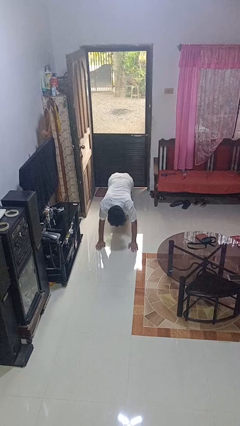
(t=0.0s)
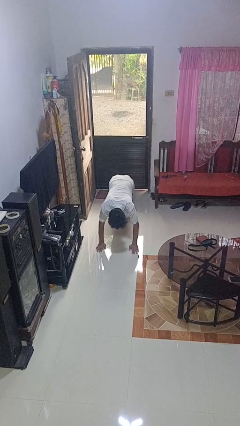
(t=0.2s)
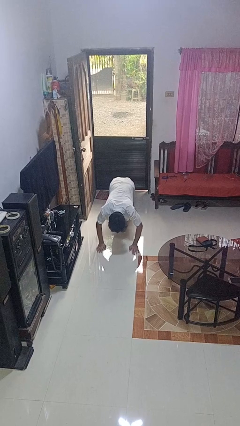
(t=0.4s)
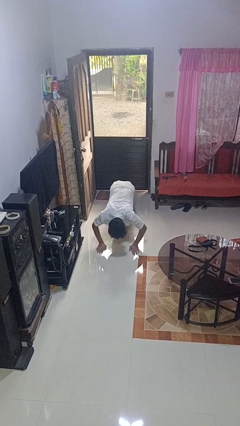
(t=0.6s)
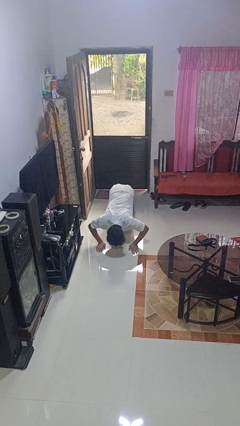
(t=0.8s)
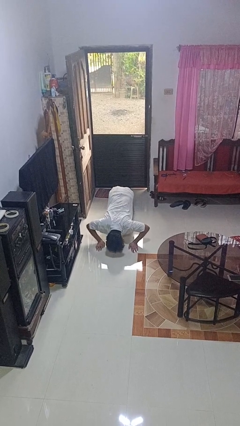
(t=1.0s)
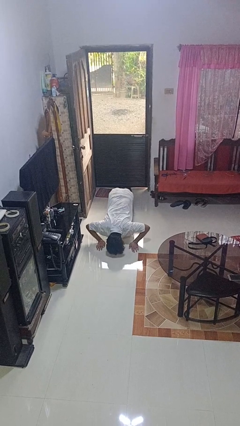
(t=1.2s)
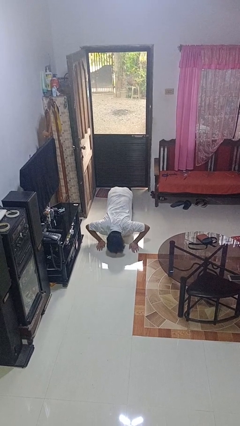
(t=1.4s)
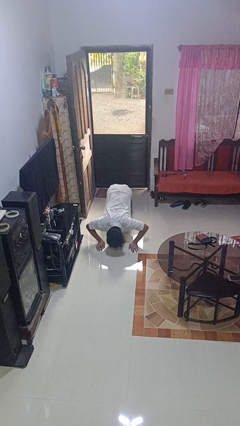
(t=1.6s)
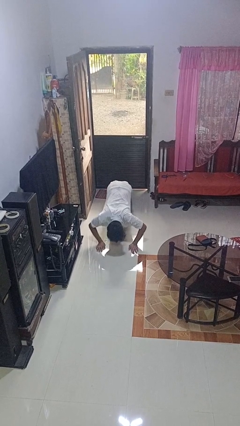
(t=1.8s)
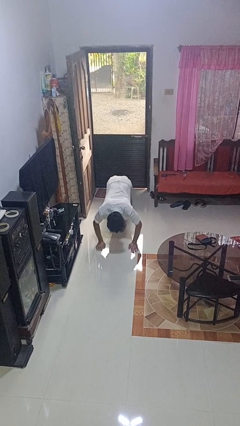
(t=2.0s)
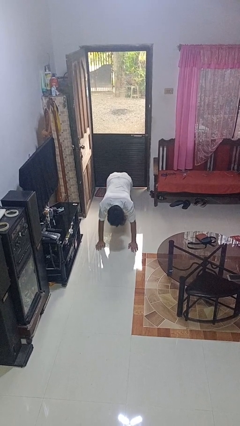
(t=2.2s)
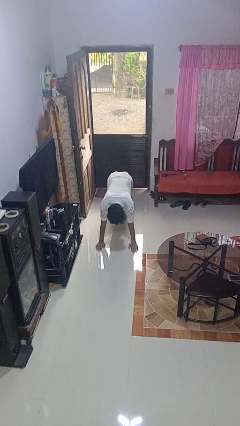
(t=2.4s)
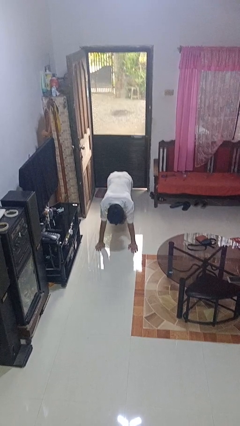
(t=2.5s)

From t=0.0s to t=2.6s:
person exercises with pushup

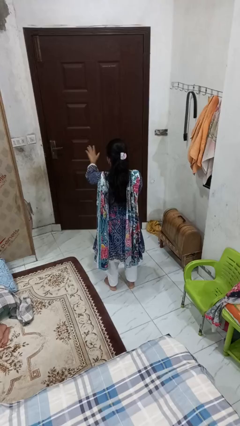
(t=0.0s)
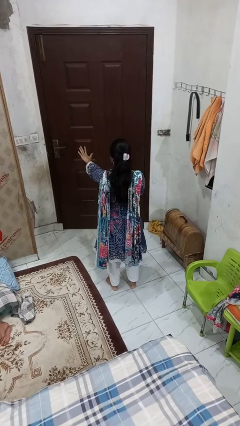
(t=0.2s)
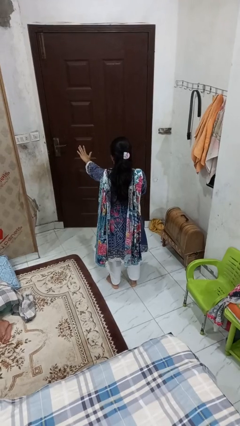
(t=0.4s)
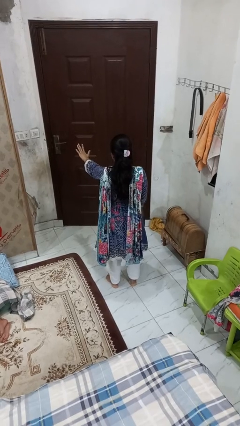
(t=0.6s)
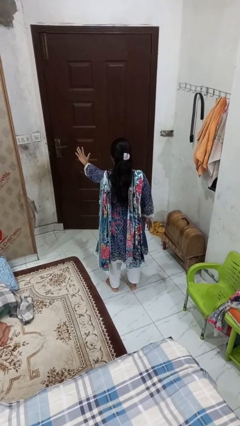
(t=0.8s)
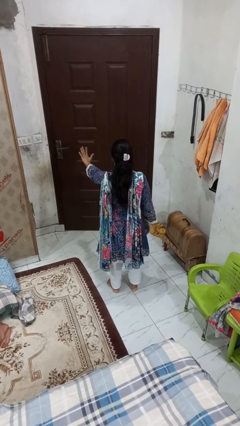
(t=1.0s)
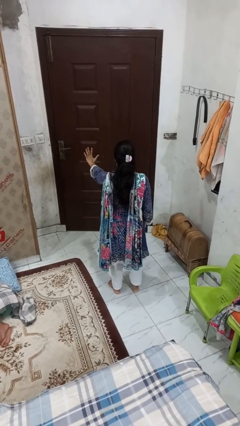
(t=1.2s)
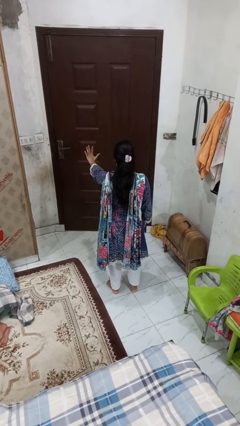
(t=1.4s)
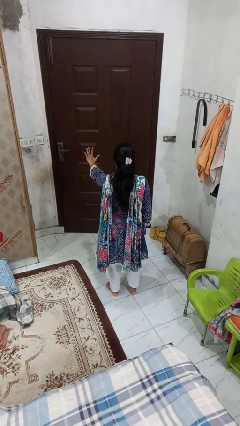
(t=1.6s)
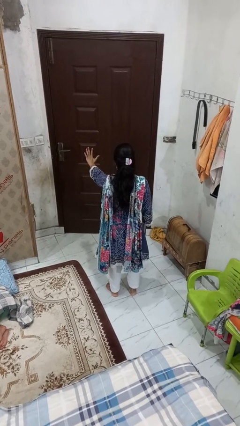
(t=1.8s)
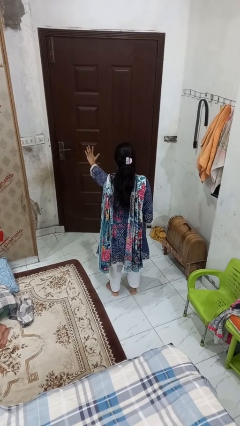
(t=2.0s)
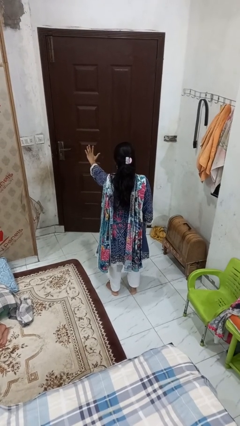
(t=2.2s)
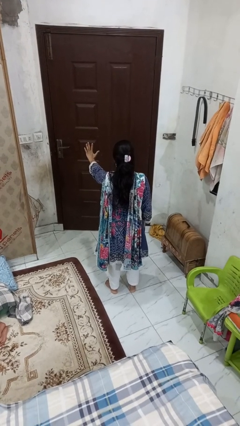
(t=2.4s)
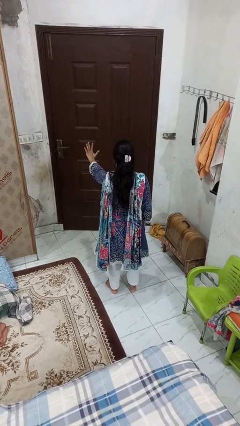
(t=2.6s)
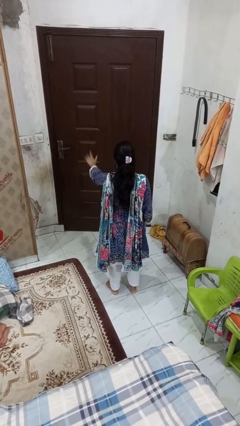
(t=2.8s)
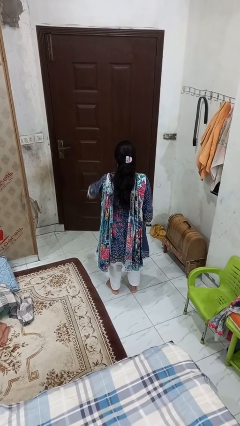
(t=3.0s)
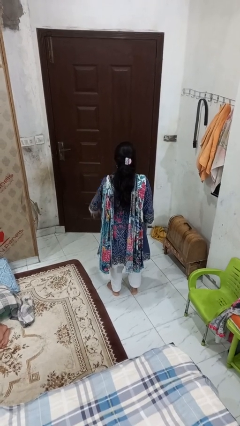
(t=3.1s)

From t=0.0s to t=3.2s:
person gestures stop

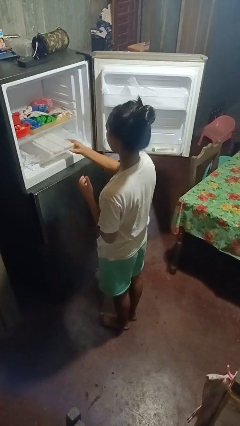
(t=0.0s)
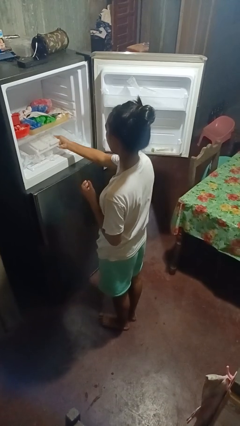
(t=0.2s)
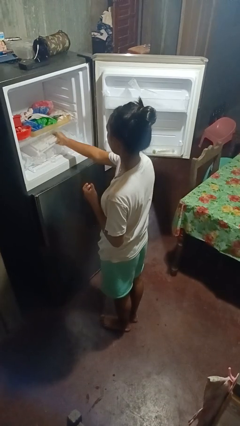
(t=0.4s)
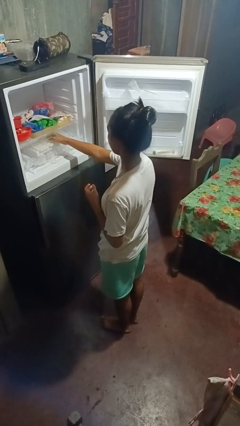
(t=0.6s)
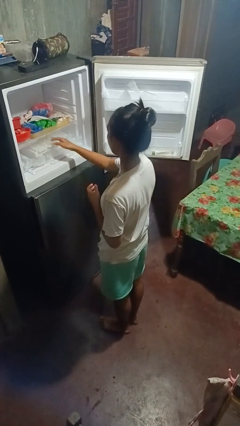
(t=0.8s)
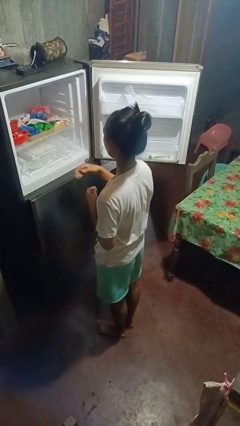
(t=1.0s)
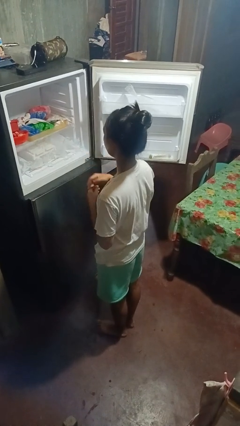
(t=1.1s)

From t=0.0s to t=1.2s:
person puts object into refrigerator

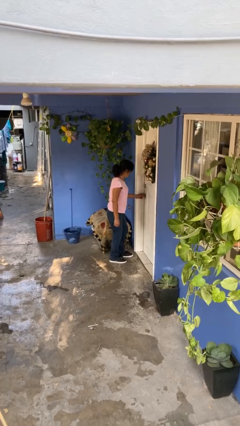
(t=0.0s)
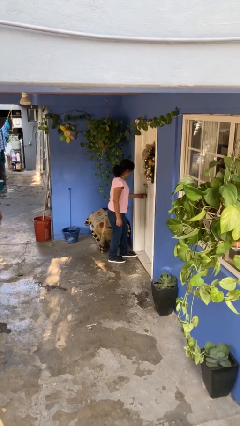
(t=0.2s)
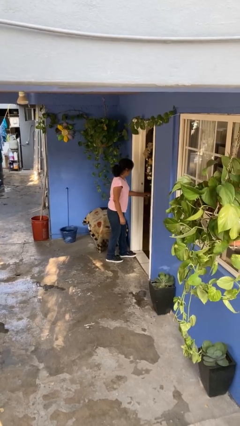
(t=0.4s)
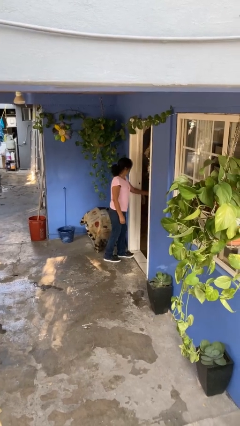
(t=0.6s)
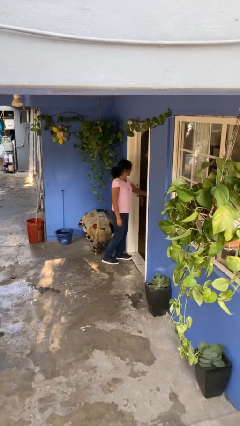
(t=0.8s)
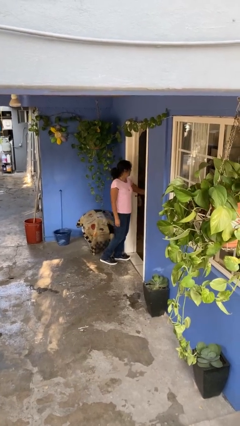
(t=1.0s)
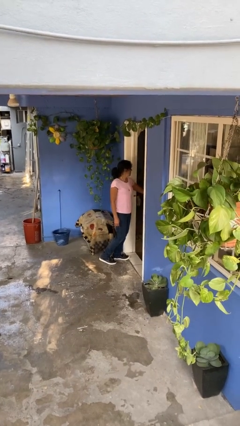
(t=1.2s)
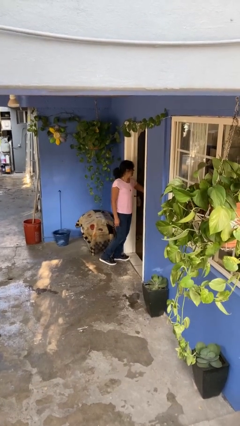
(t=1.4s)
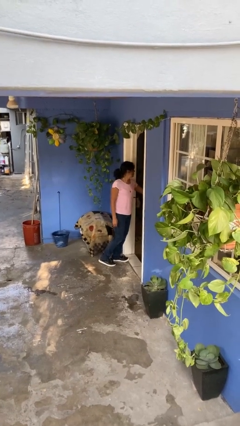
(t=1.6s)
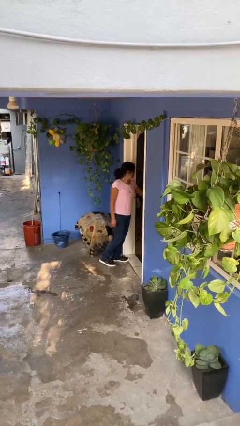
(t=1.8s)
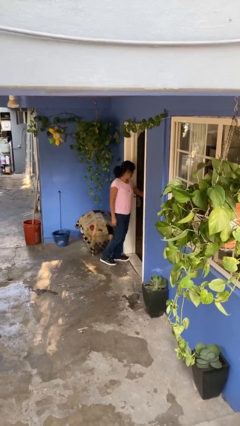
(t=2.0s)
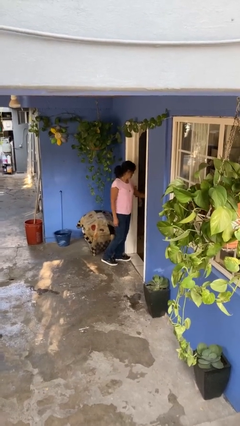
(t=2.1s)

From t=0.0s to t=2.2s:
person opens facility door

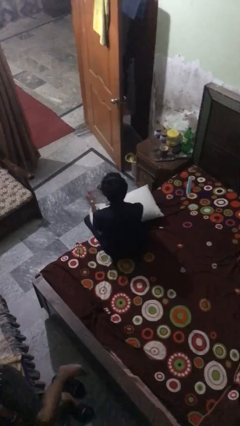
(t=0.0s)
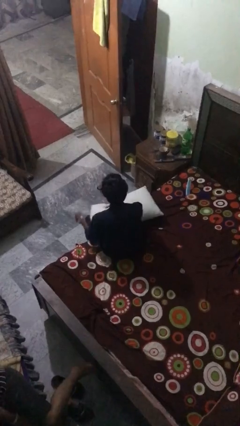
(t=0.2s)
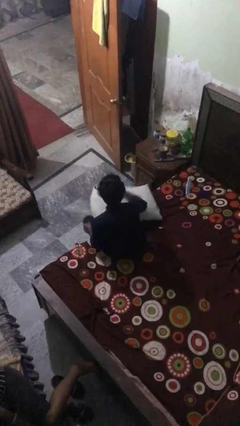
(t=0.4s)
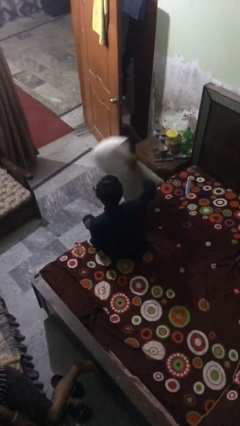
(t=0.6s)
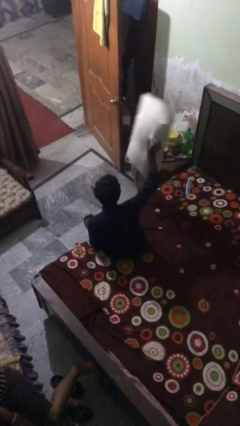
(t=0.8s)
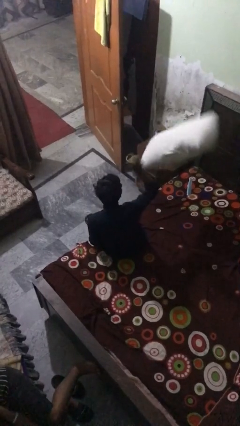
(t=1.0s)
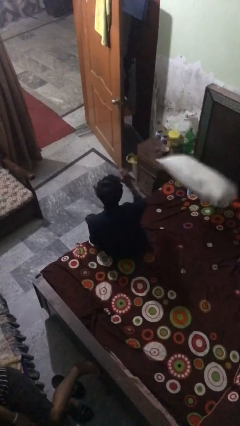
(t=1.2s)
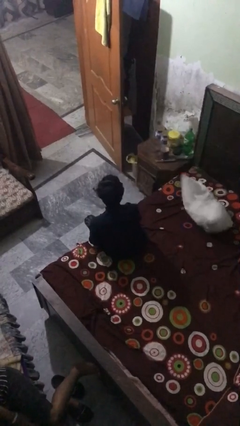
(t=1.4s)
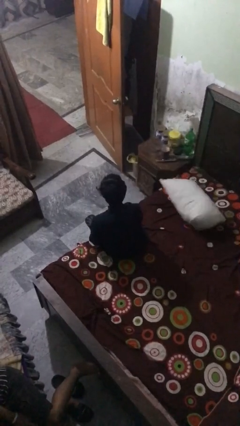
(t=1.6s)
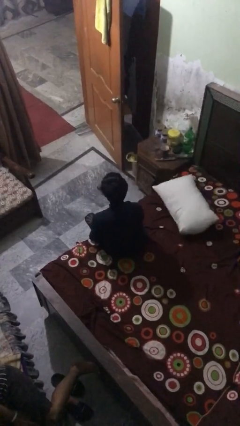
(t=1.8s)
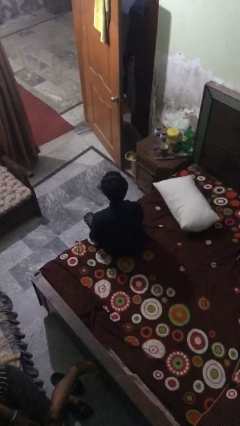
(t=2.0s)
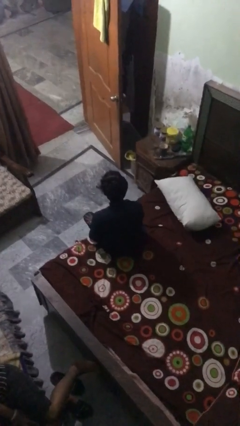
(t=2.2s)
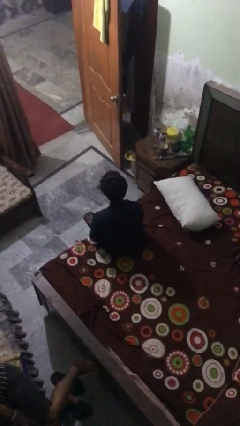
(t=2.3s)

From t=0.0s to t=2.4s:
person throws object on bed

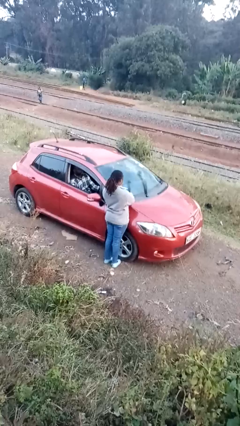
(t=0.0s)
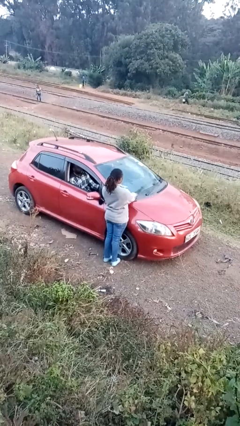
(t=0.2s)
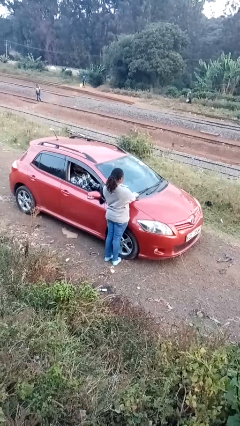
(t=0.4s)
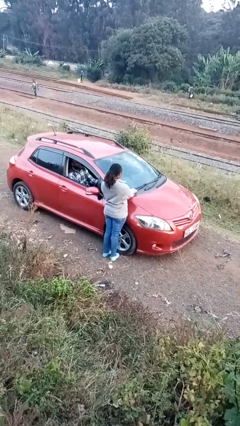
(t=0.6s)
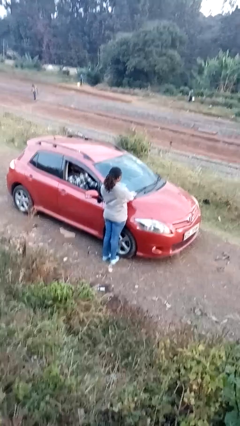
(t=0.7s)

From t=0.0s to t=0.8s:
person flips down car wipers

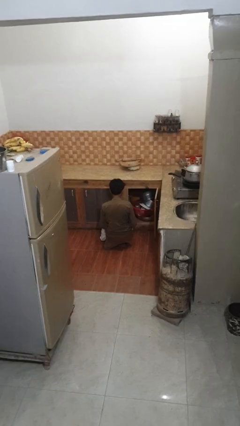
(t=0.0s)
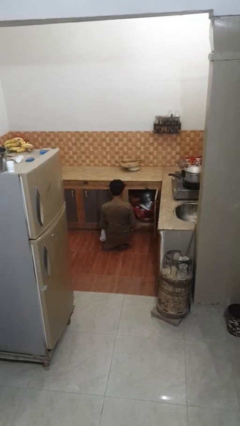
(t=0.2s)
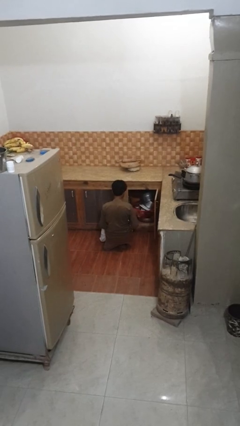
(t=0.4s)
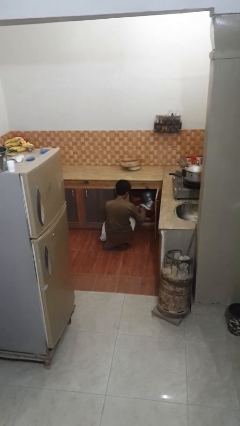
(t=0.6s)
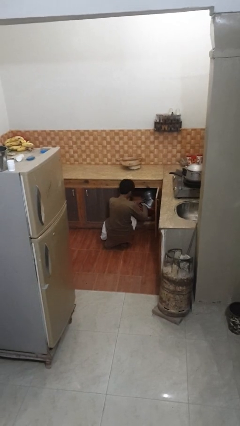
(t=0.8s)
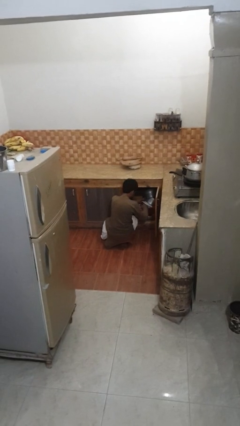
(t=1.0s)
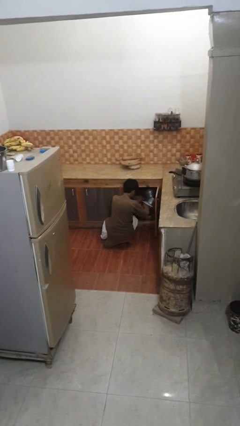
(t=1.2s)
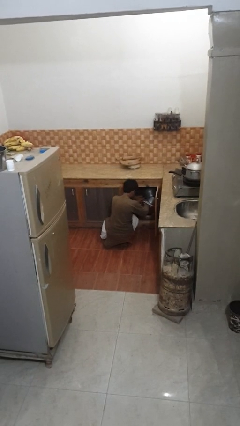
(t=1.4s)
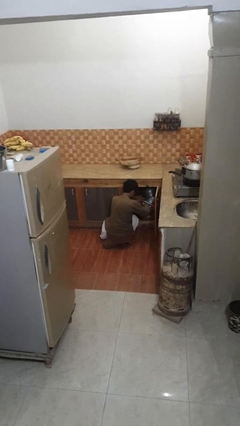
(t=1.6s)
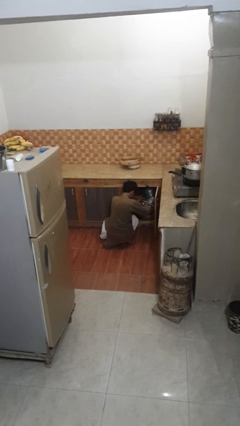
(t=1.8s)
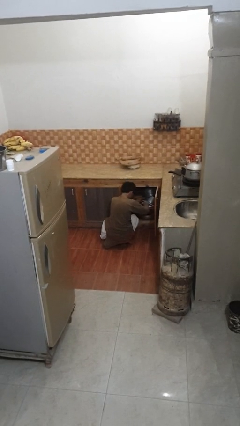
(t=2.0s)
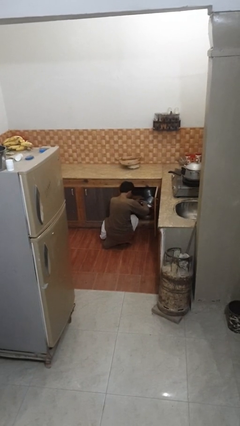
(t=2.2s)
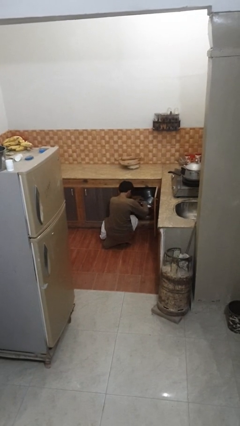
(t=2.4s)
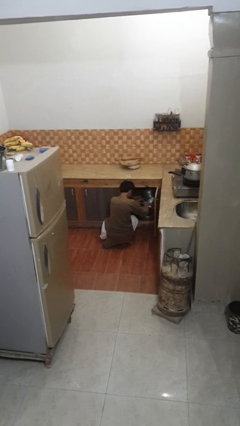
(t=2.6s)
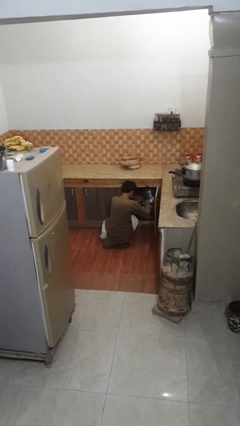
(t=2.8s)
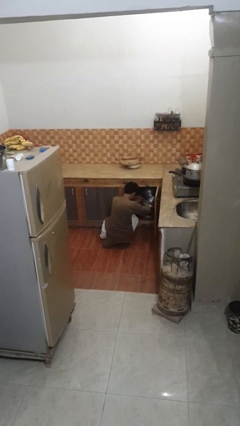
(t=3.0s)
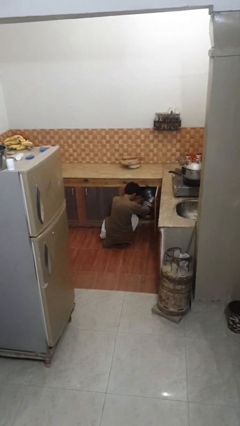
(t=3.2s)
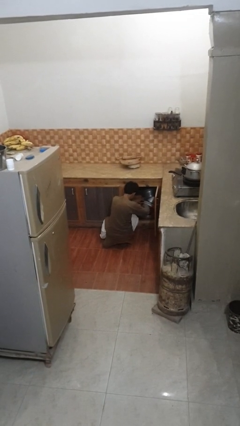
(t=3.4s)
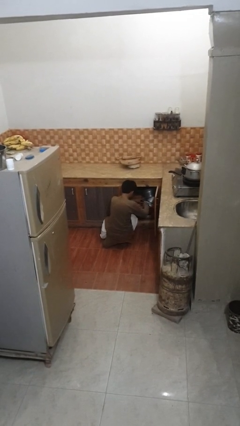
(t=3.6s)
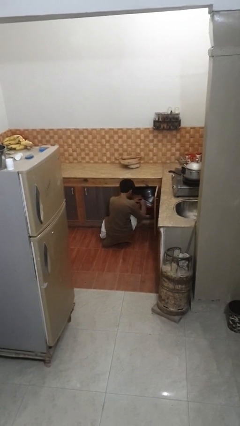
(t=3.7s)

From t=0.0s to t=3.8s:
person searches in kitchen drawer

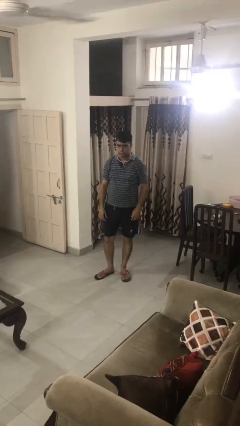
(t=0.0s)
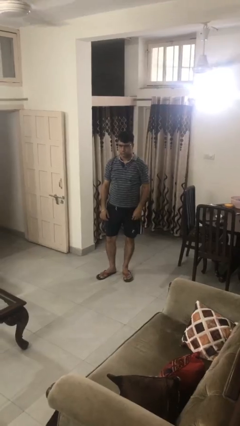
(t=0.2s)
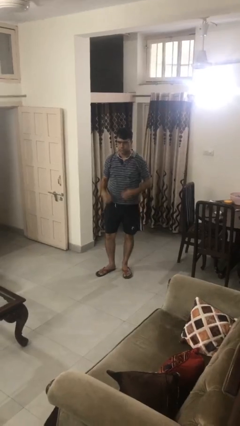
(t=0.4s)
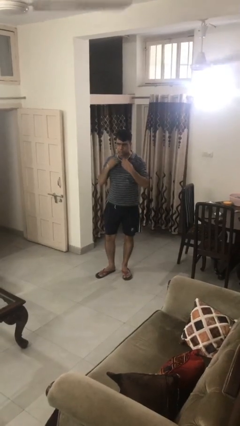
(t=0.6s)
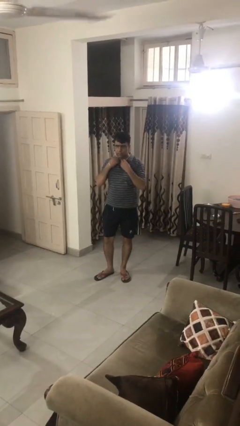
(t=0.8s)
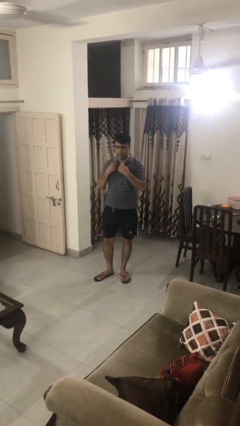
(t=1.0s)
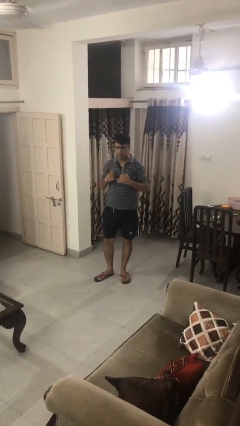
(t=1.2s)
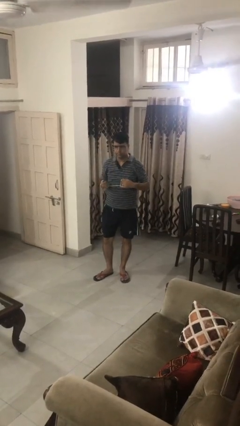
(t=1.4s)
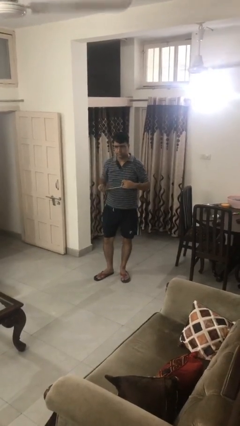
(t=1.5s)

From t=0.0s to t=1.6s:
person takes off necklace
